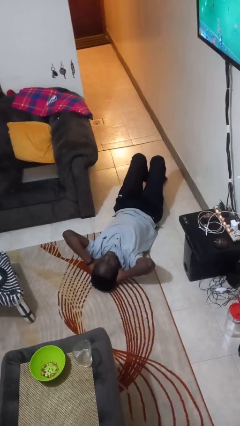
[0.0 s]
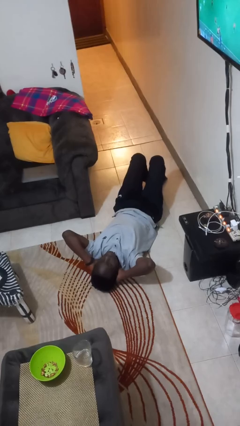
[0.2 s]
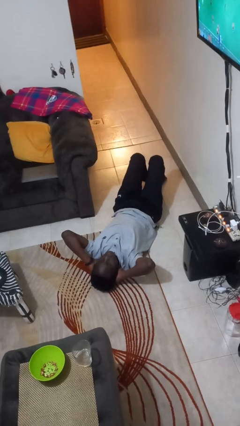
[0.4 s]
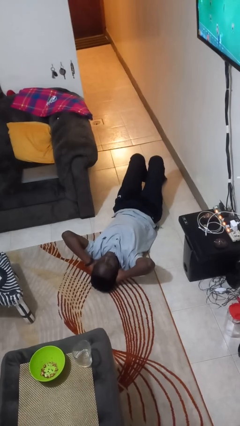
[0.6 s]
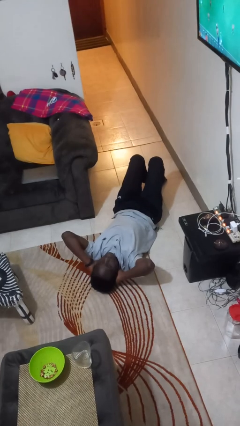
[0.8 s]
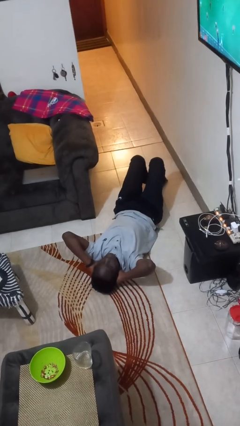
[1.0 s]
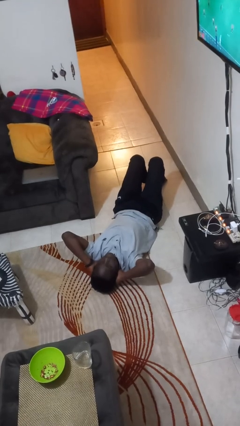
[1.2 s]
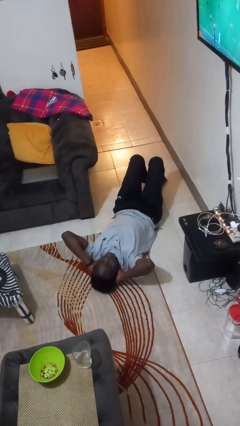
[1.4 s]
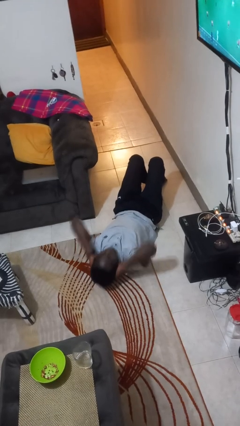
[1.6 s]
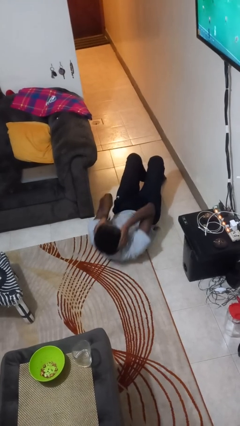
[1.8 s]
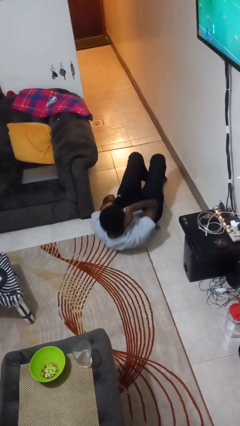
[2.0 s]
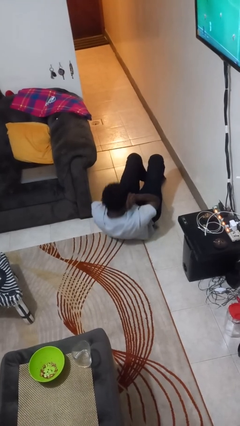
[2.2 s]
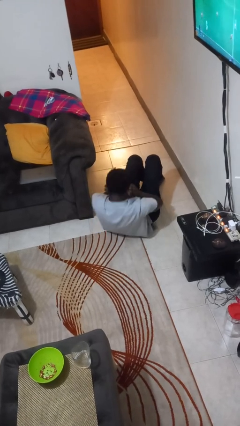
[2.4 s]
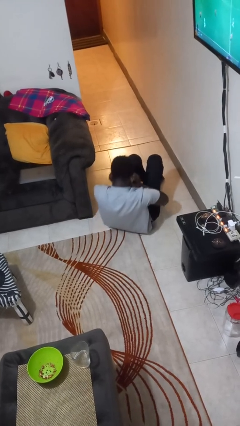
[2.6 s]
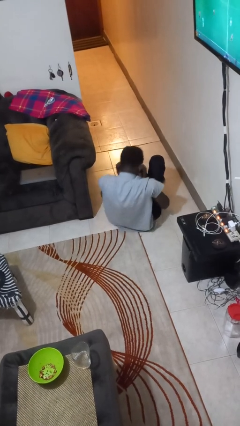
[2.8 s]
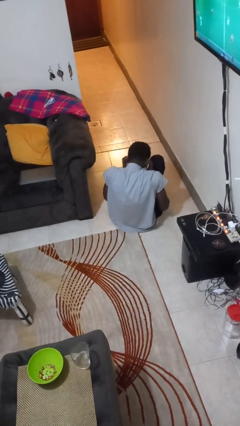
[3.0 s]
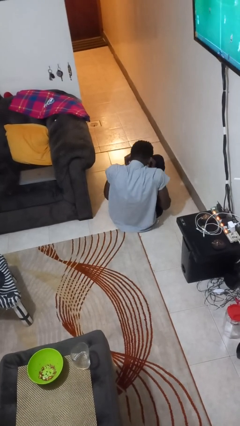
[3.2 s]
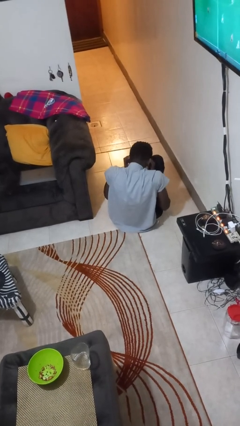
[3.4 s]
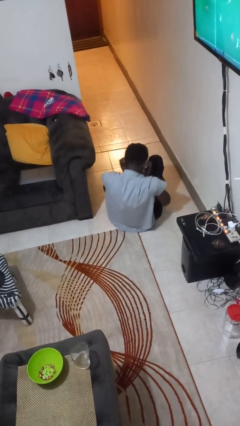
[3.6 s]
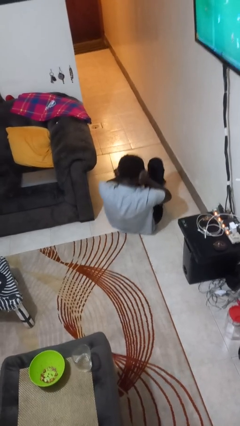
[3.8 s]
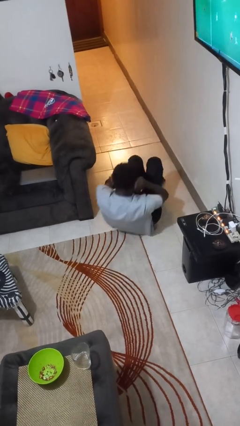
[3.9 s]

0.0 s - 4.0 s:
person exercises with situp

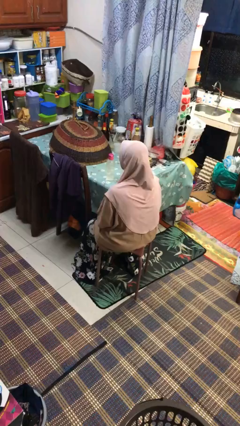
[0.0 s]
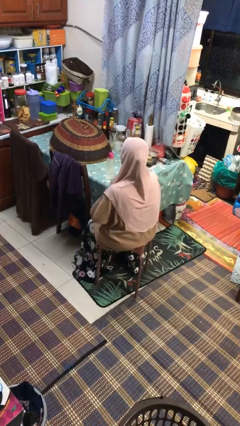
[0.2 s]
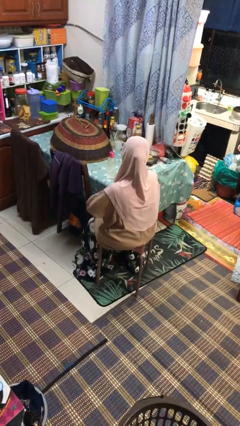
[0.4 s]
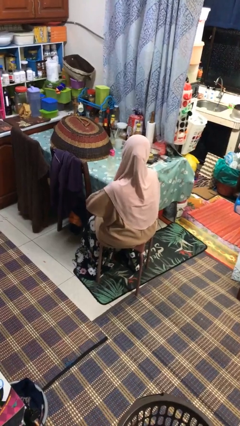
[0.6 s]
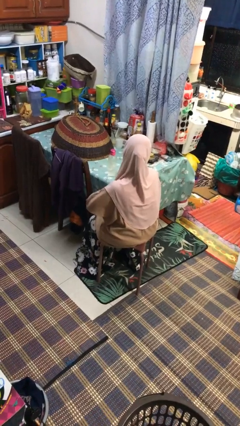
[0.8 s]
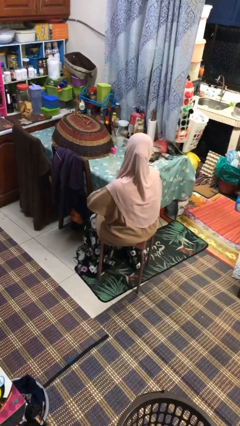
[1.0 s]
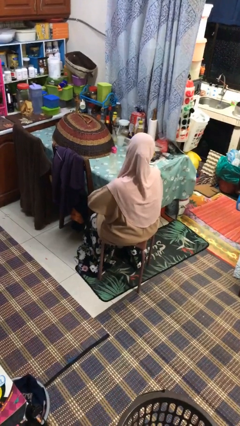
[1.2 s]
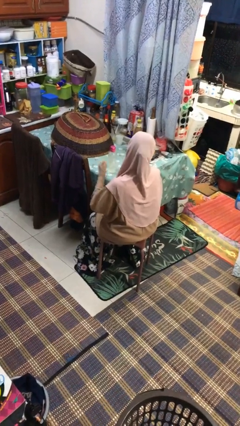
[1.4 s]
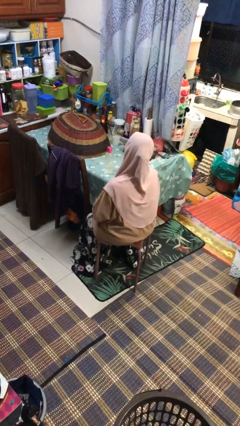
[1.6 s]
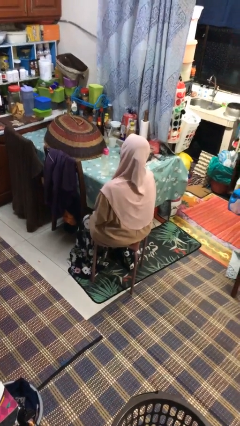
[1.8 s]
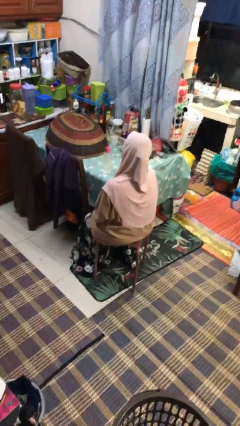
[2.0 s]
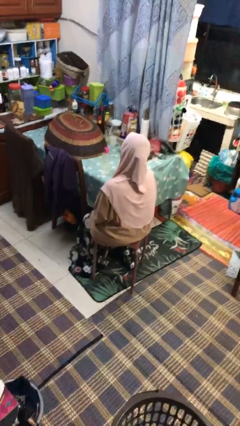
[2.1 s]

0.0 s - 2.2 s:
person drums on chest

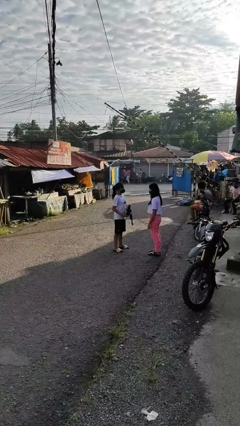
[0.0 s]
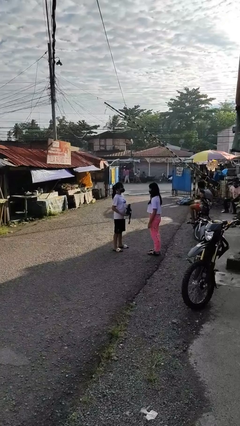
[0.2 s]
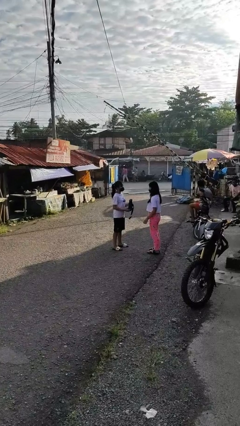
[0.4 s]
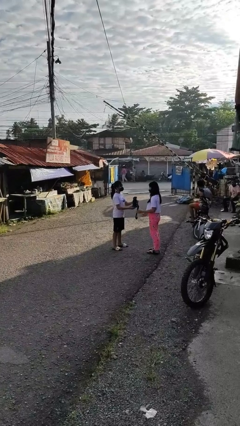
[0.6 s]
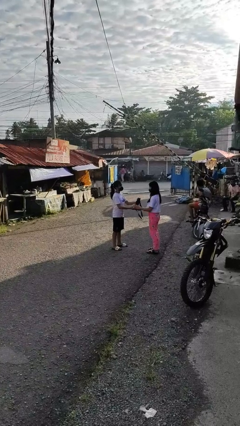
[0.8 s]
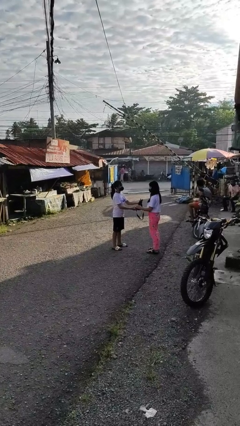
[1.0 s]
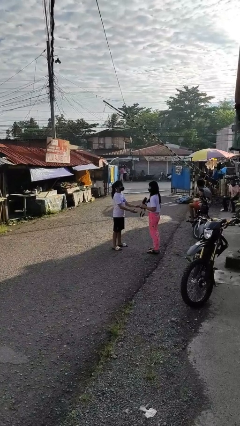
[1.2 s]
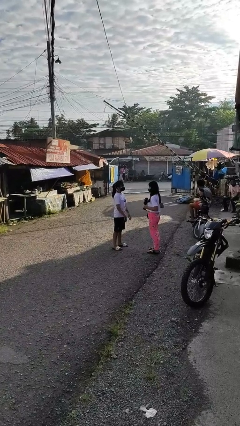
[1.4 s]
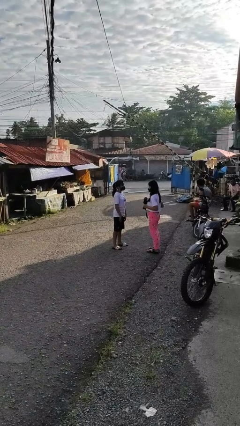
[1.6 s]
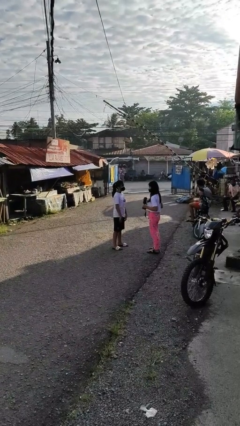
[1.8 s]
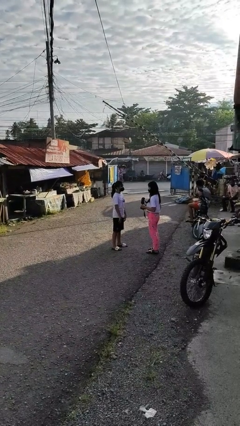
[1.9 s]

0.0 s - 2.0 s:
person transfers object to person

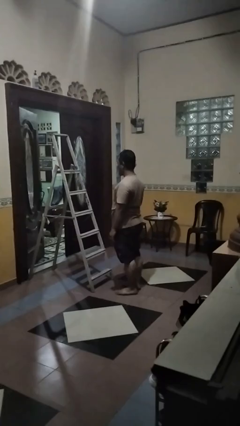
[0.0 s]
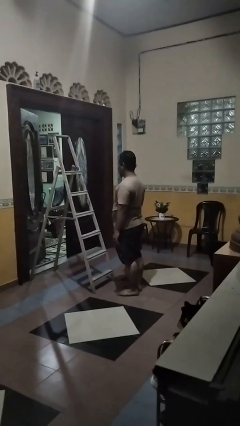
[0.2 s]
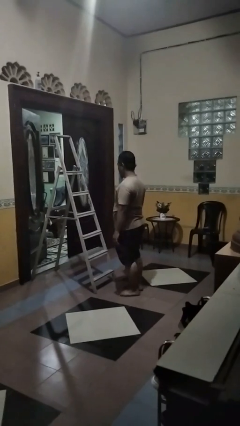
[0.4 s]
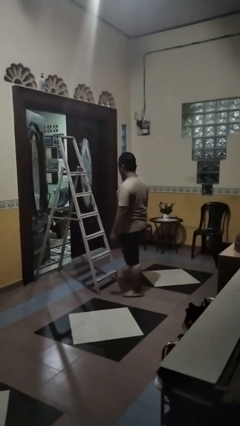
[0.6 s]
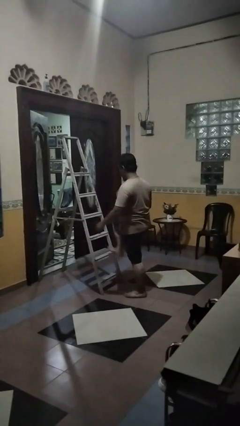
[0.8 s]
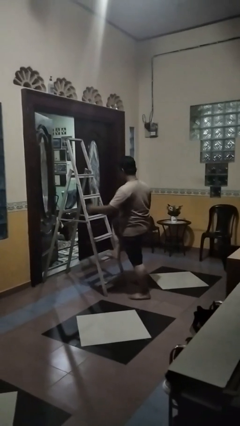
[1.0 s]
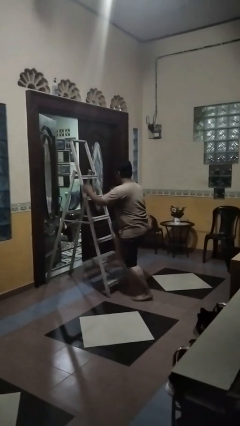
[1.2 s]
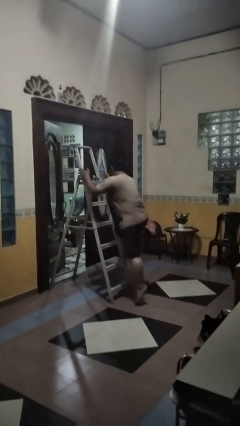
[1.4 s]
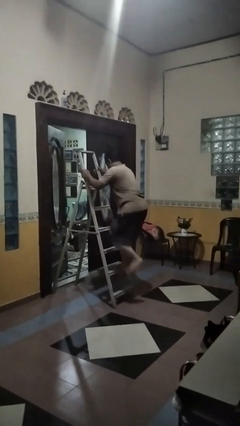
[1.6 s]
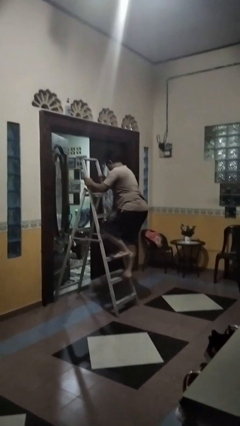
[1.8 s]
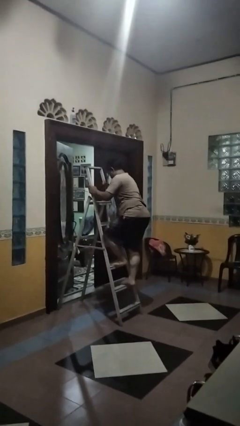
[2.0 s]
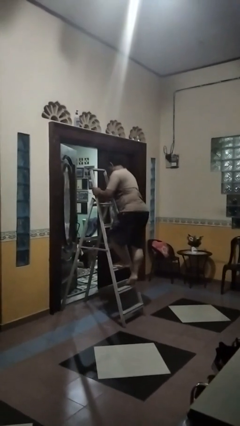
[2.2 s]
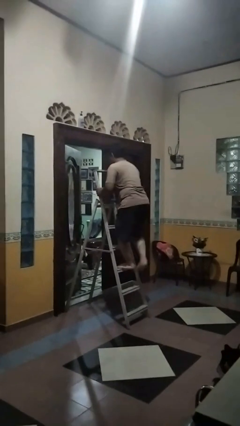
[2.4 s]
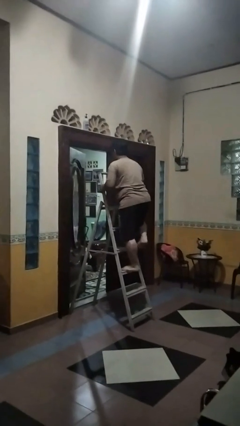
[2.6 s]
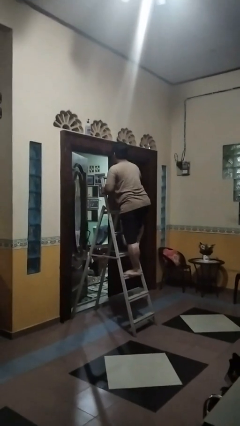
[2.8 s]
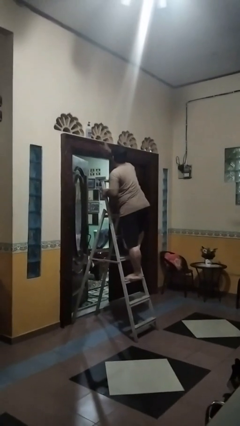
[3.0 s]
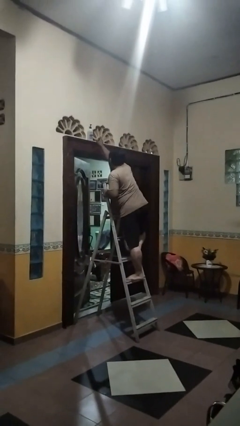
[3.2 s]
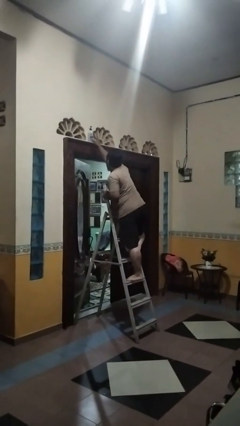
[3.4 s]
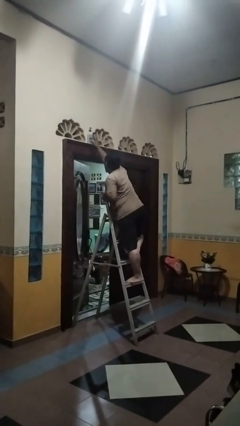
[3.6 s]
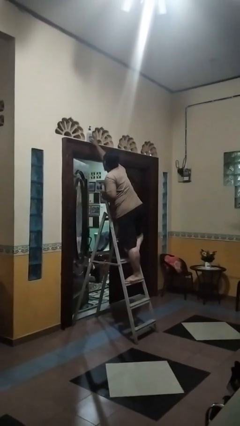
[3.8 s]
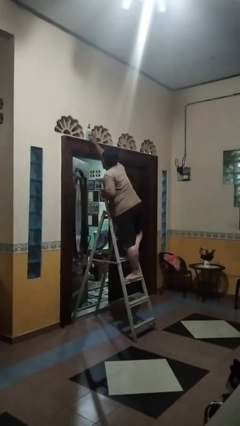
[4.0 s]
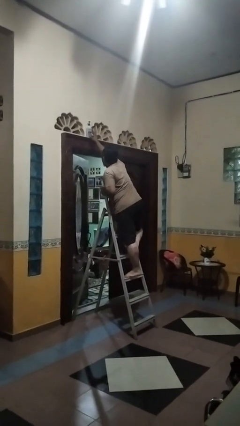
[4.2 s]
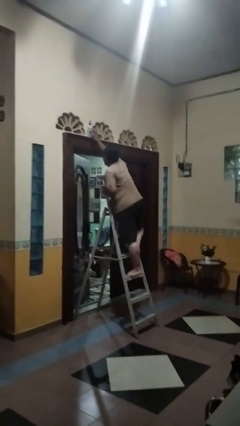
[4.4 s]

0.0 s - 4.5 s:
person climbs up ladder

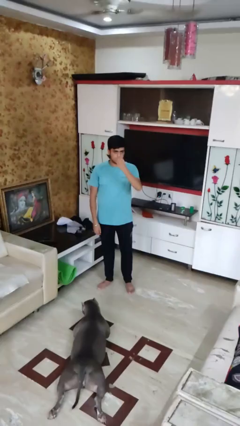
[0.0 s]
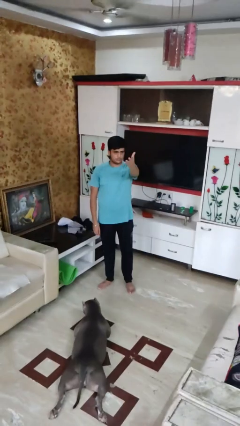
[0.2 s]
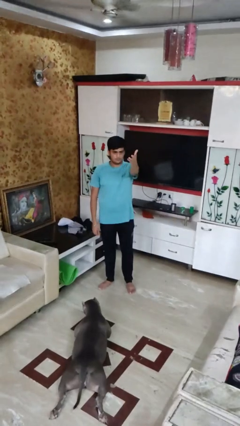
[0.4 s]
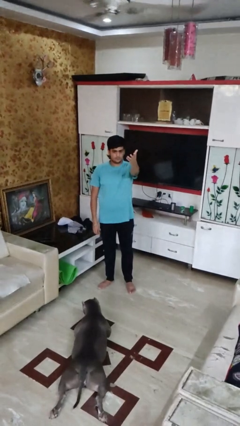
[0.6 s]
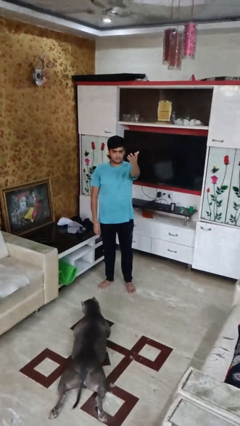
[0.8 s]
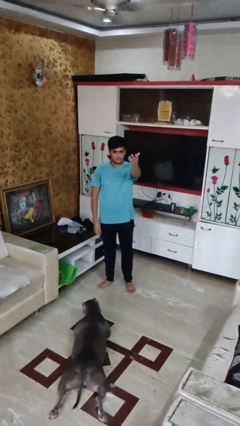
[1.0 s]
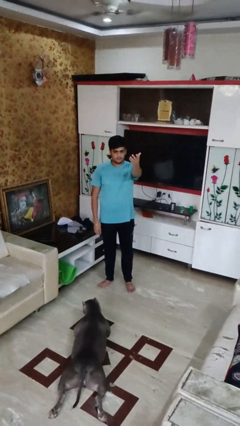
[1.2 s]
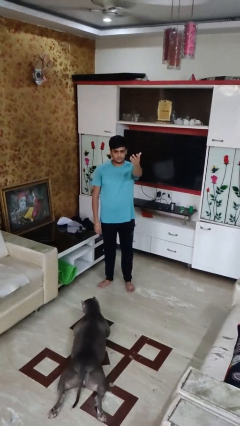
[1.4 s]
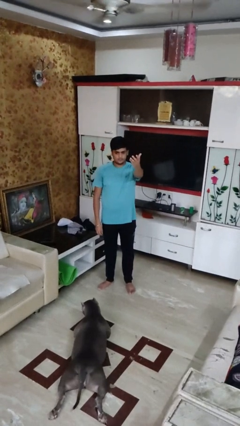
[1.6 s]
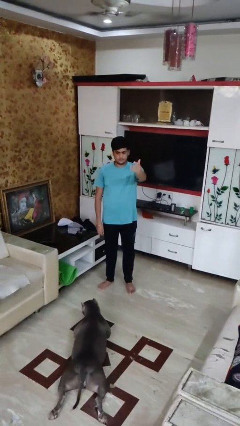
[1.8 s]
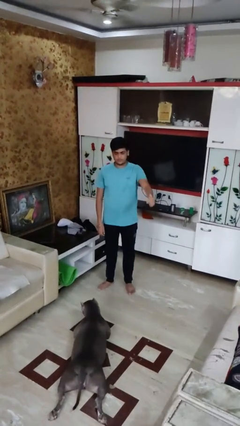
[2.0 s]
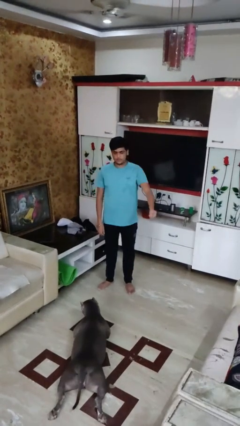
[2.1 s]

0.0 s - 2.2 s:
person gestures blow kiss

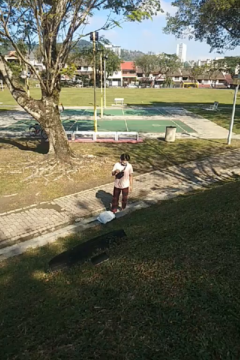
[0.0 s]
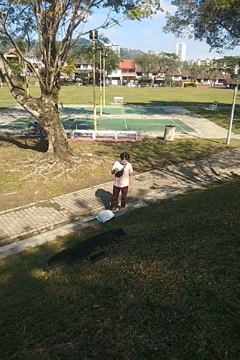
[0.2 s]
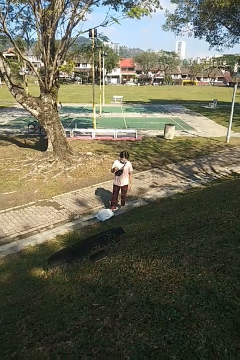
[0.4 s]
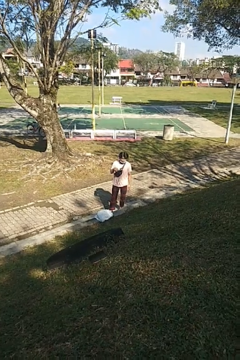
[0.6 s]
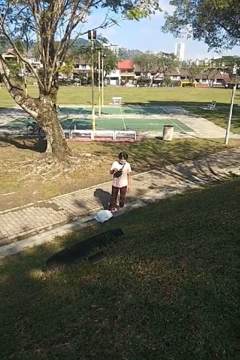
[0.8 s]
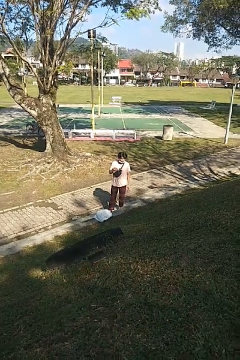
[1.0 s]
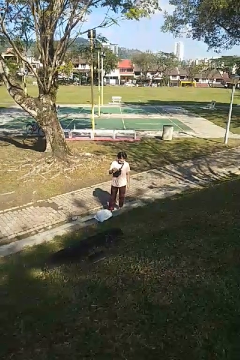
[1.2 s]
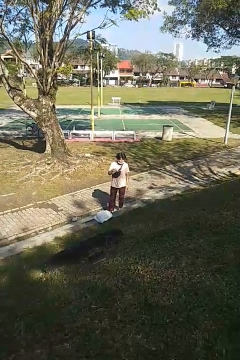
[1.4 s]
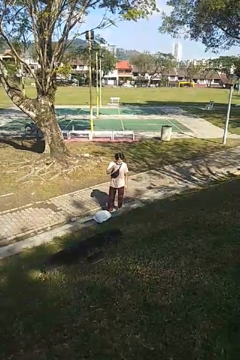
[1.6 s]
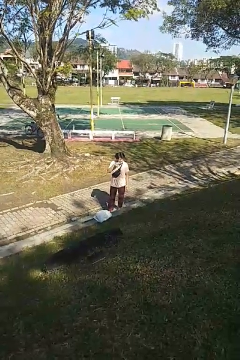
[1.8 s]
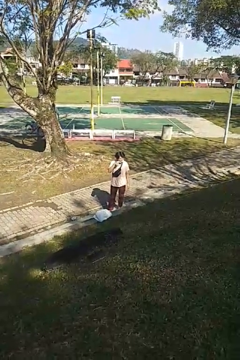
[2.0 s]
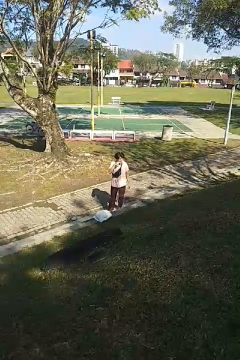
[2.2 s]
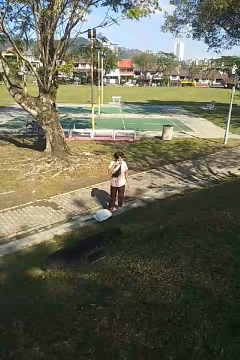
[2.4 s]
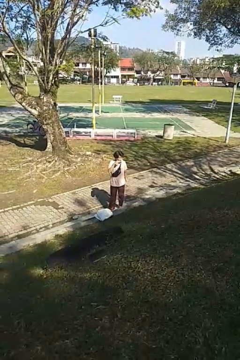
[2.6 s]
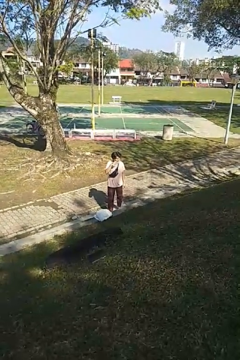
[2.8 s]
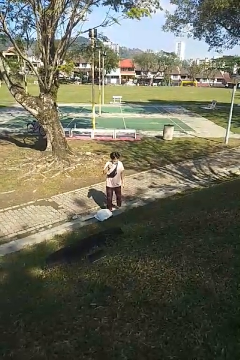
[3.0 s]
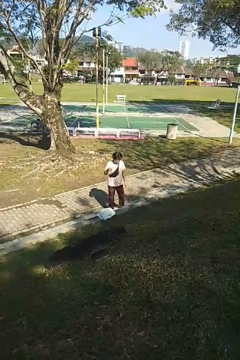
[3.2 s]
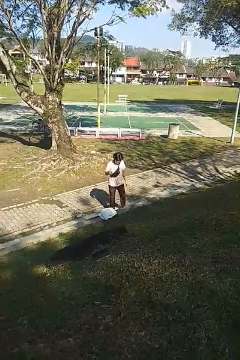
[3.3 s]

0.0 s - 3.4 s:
person brushes teeth
